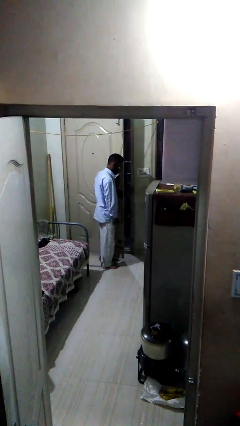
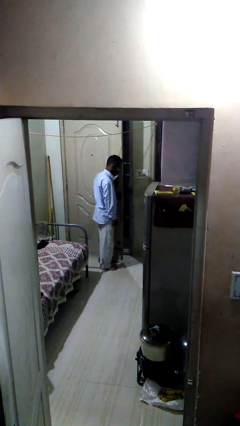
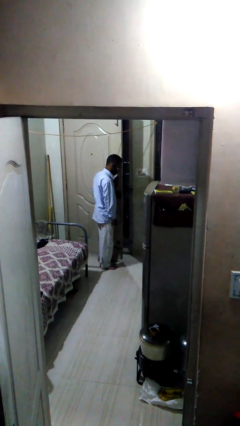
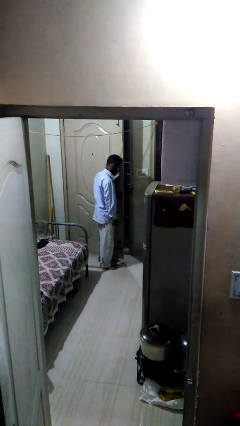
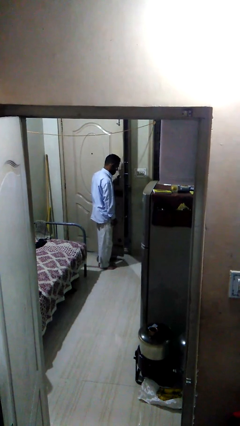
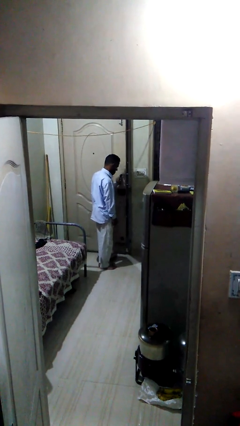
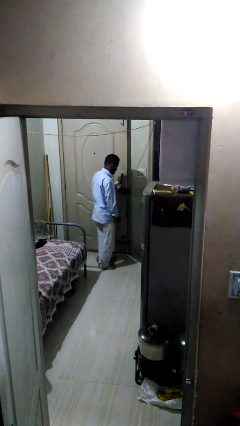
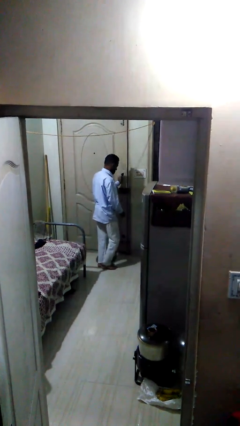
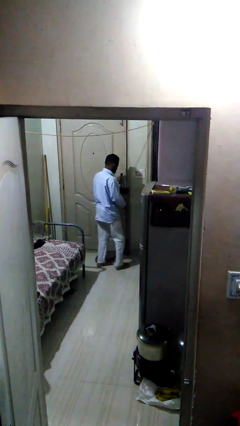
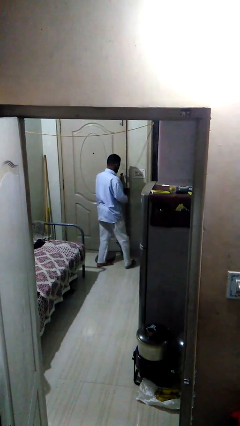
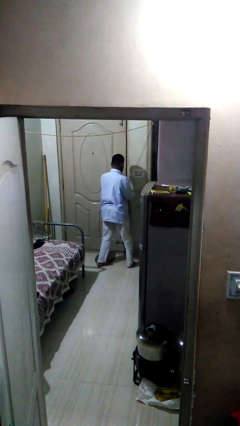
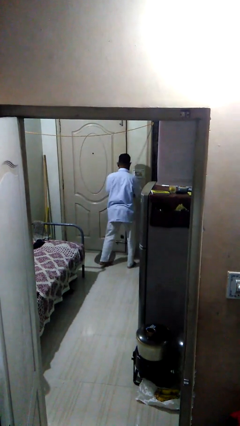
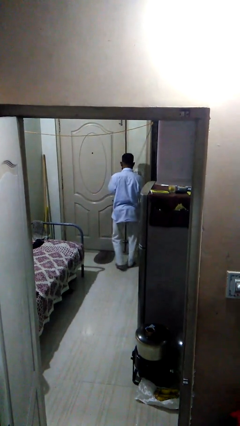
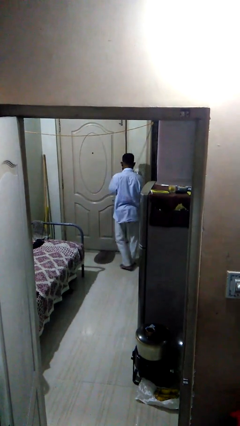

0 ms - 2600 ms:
person closes facility door

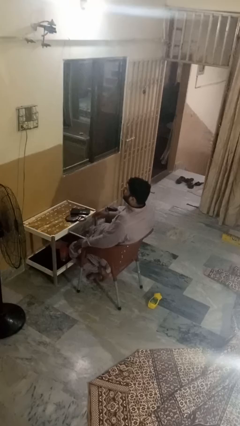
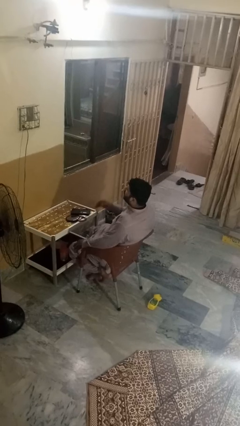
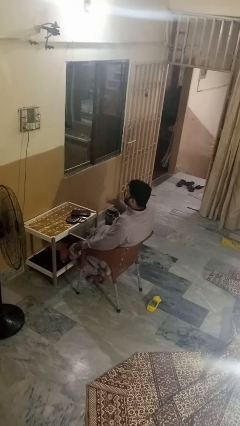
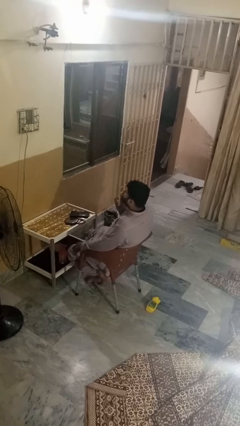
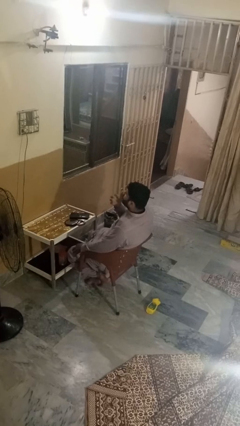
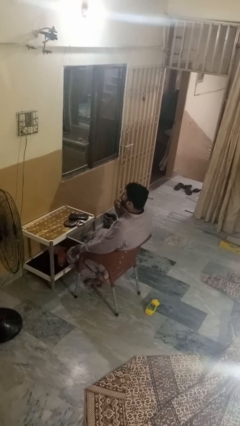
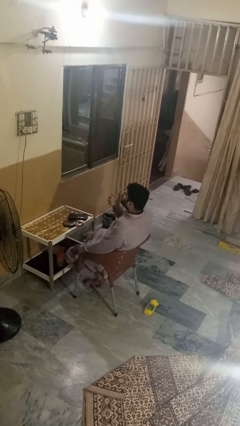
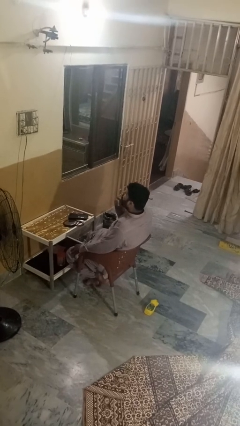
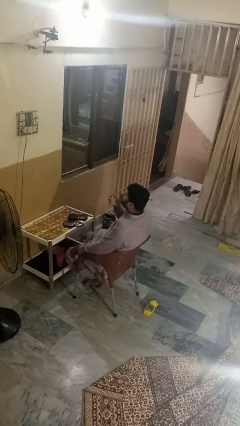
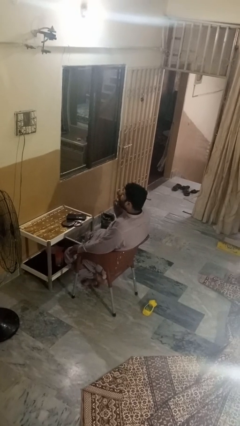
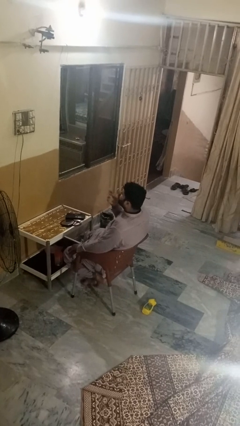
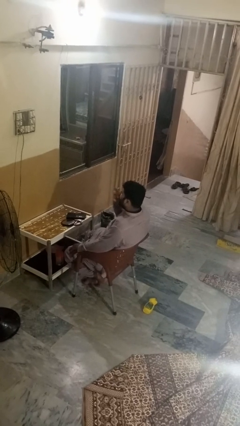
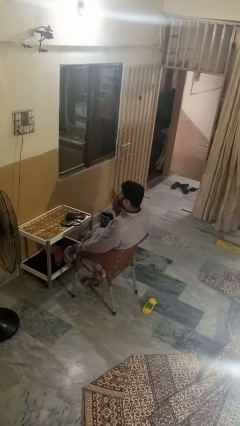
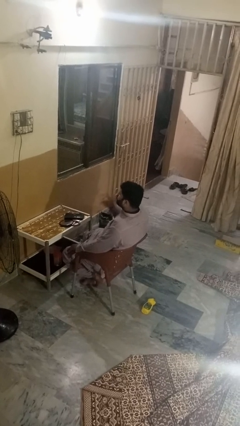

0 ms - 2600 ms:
person licks fingers

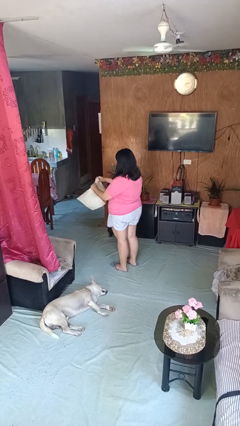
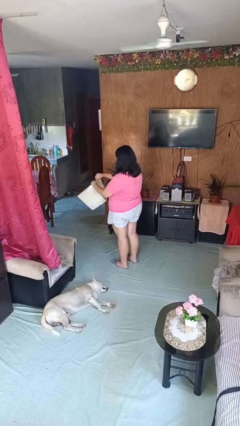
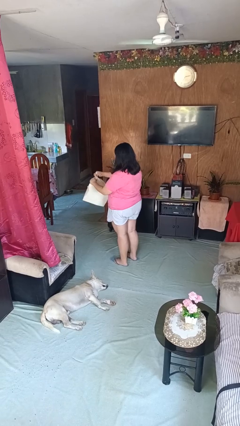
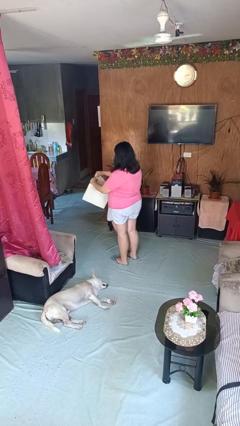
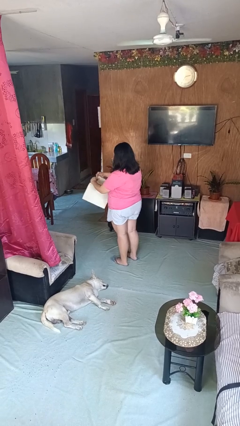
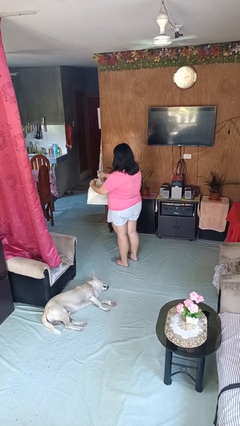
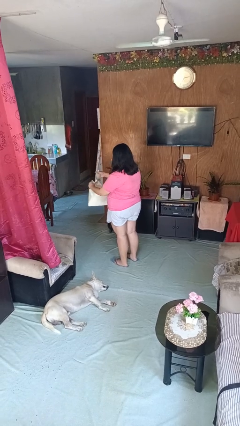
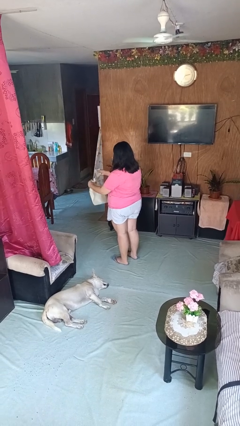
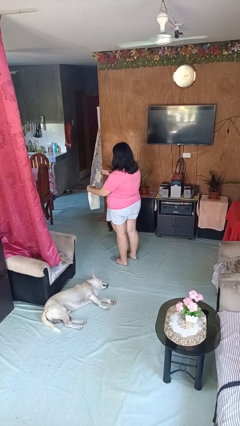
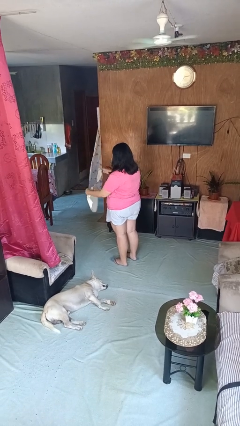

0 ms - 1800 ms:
person tears paper

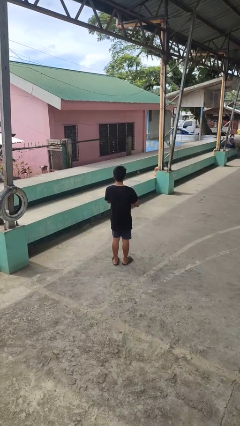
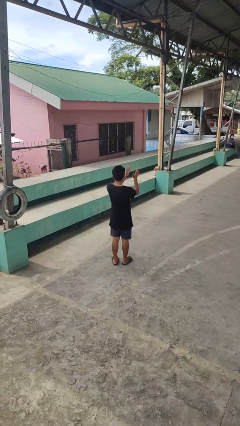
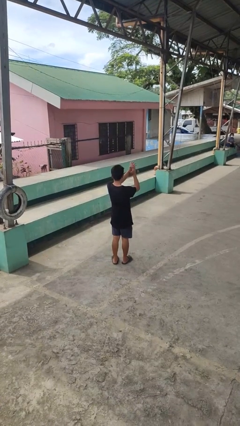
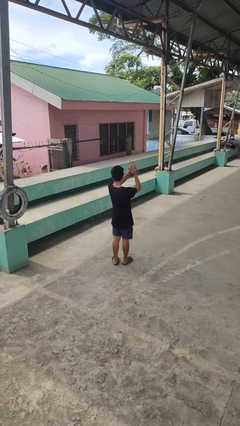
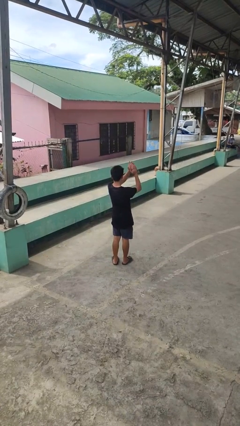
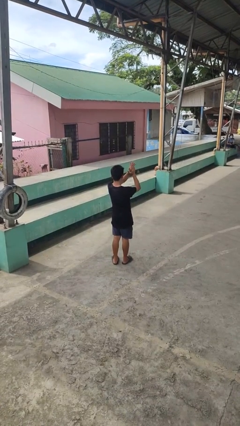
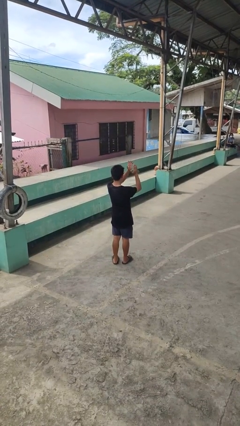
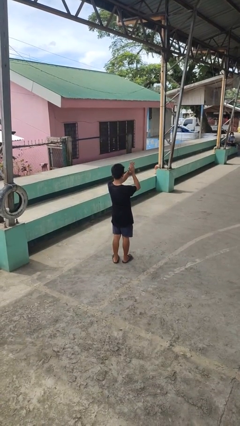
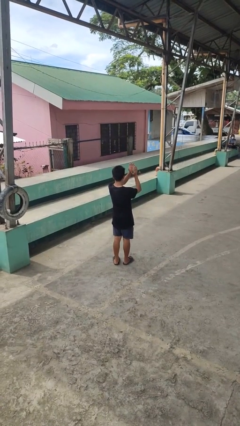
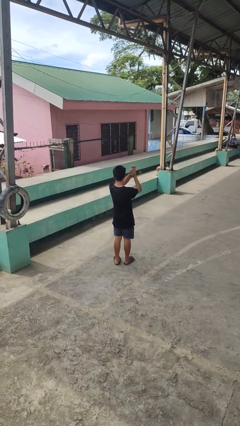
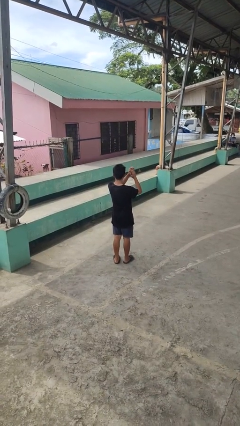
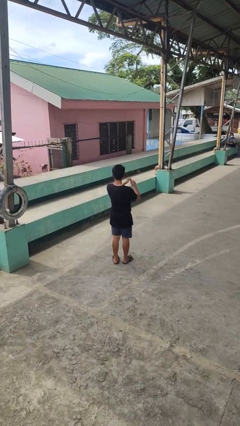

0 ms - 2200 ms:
person claps hands

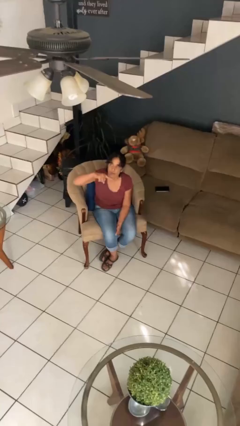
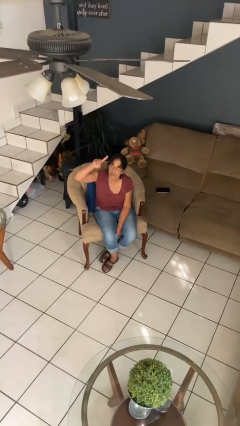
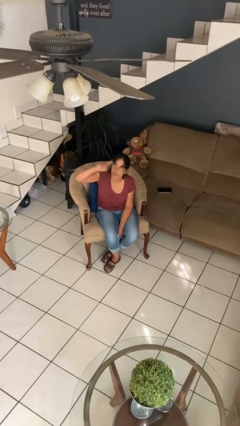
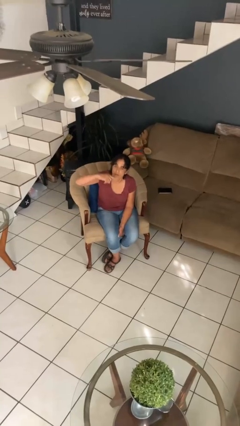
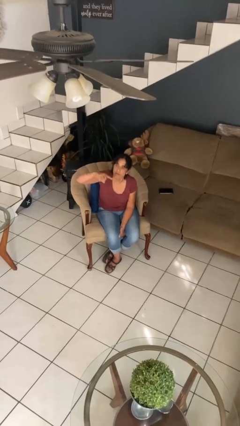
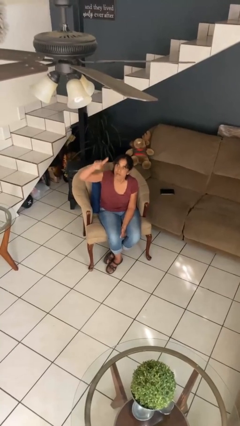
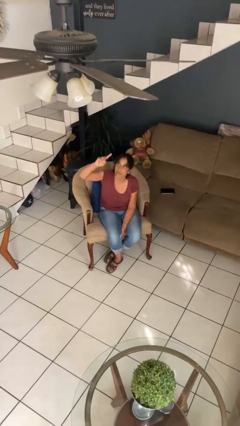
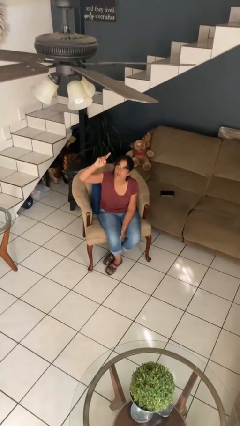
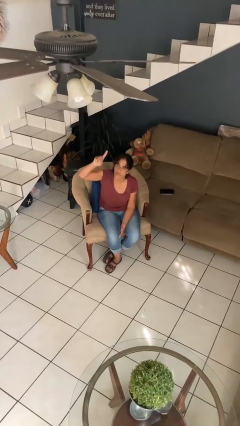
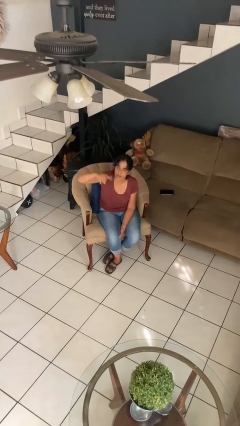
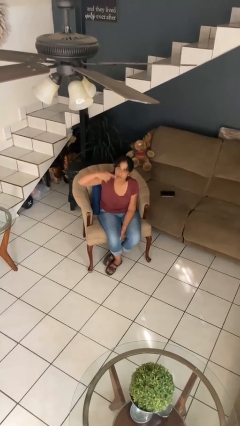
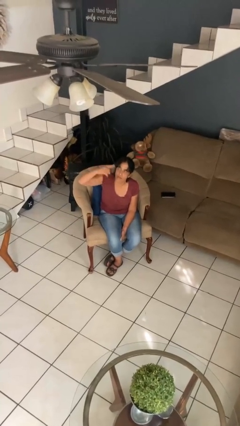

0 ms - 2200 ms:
person gestures swipe up

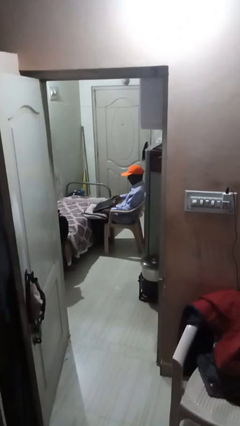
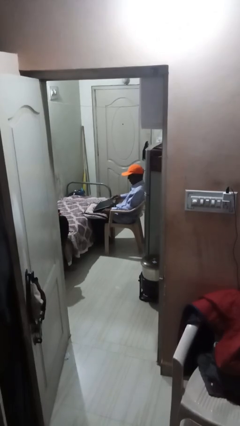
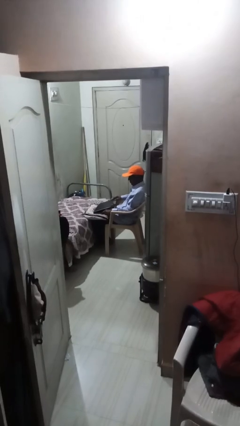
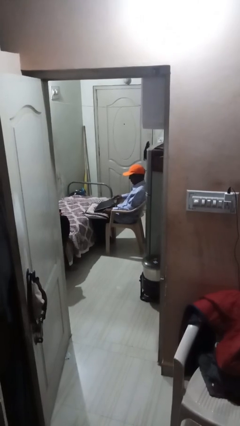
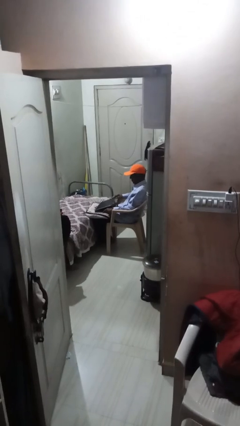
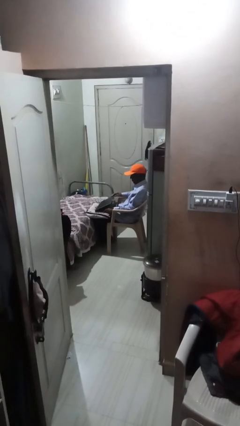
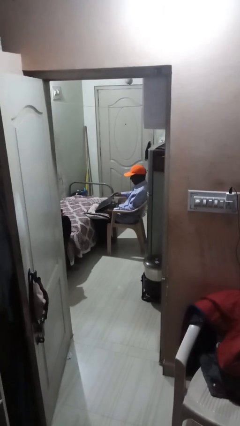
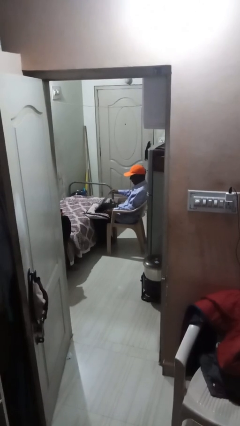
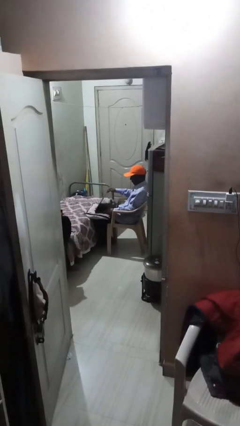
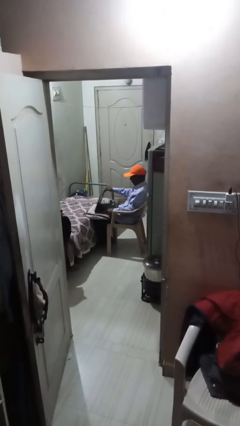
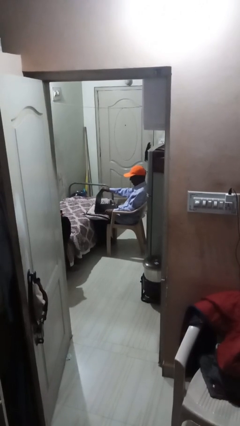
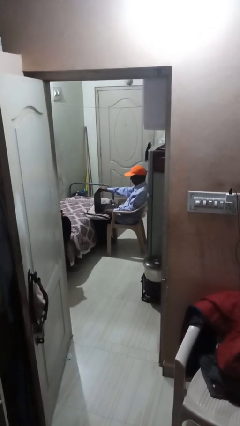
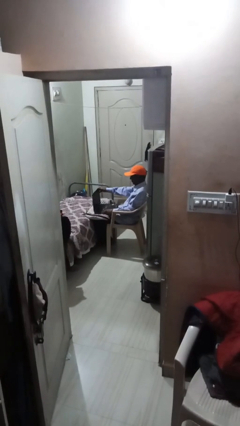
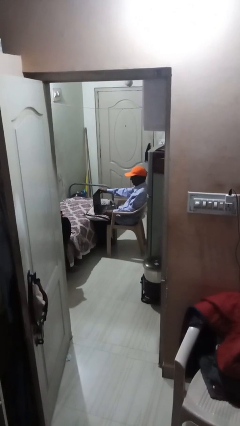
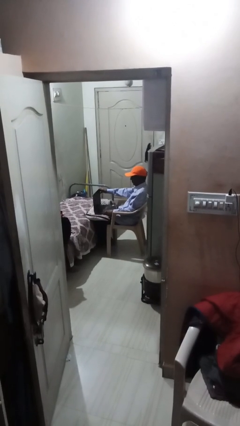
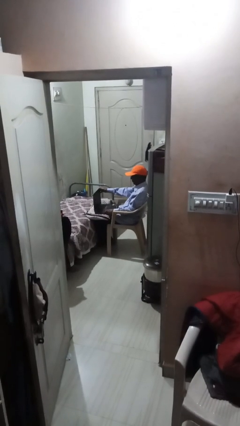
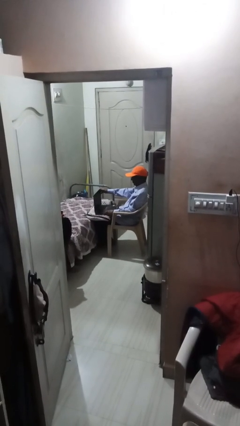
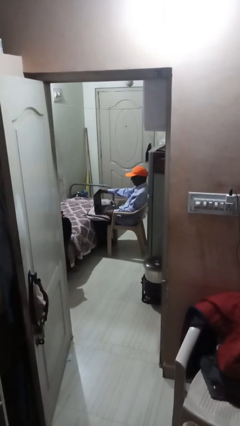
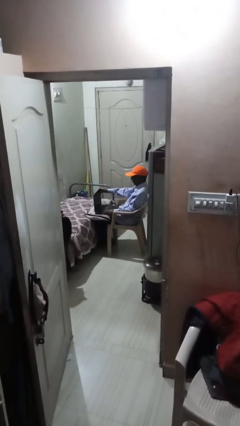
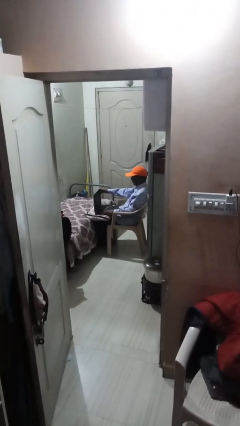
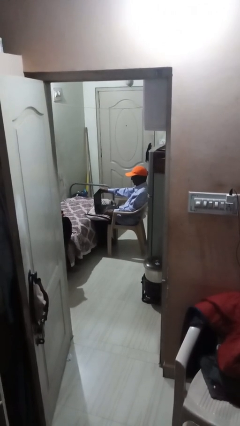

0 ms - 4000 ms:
person interacts with laptop

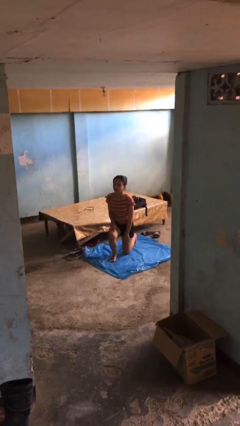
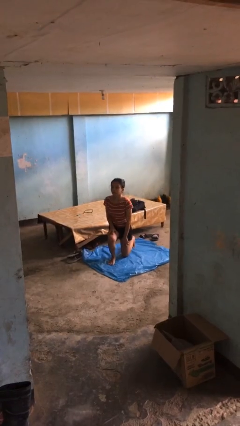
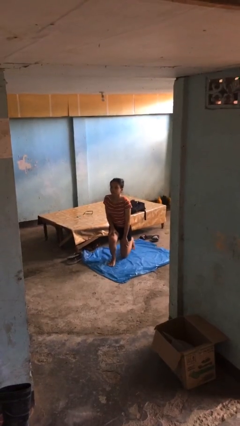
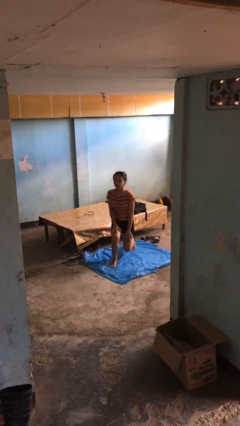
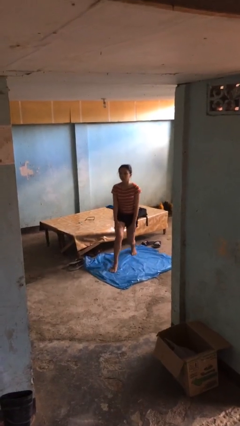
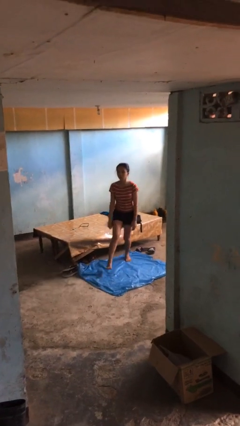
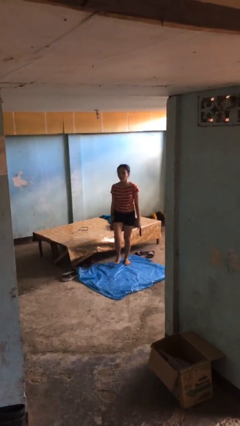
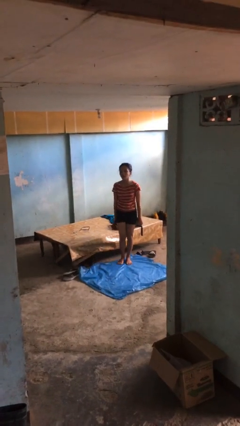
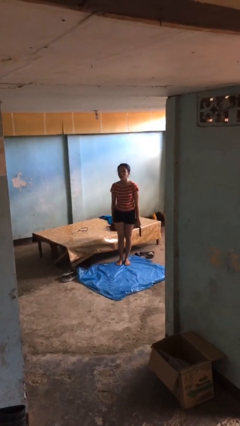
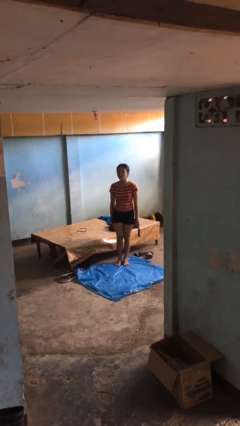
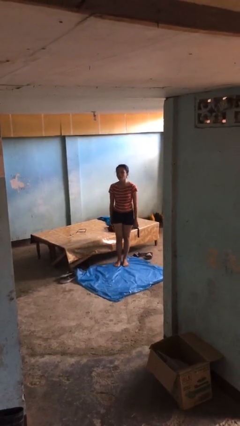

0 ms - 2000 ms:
person stands up from floor

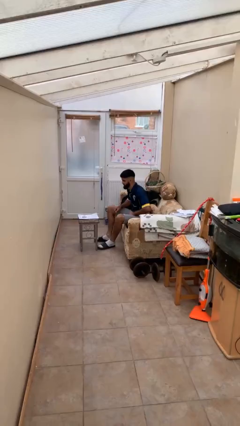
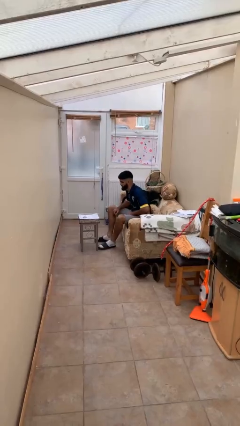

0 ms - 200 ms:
person reads document
